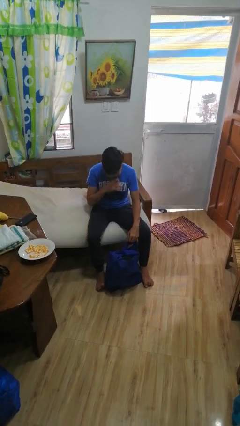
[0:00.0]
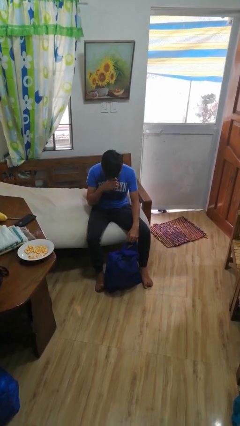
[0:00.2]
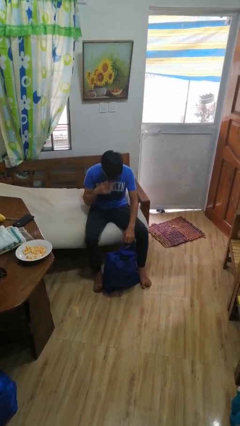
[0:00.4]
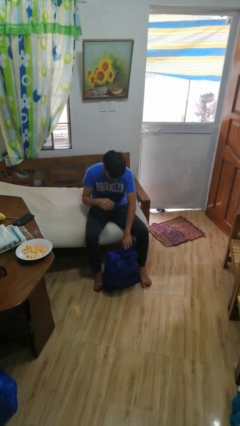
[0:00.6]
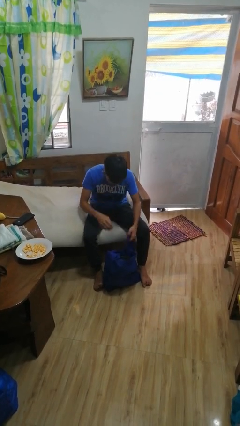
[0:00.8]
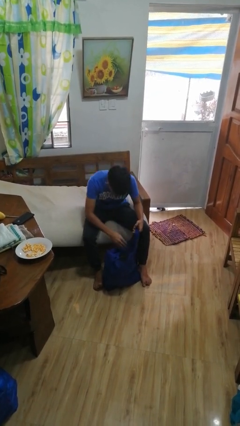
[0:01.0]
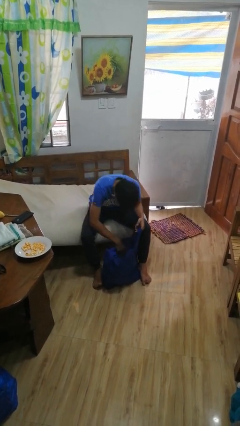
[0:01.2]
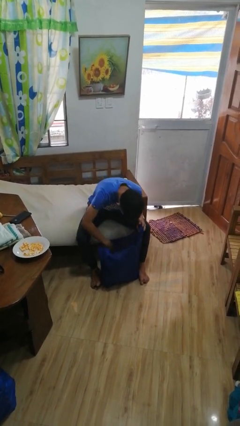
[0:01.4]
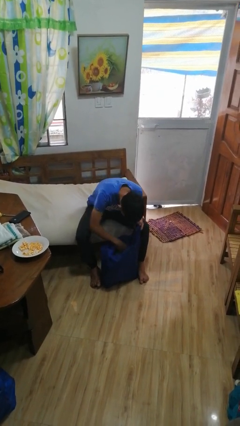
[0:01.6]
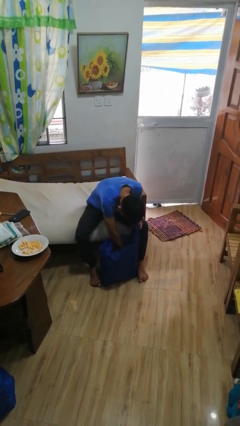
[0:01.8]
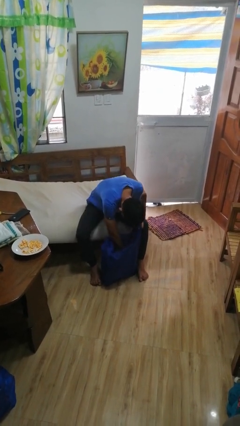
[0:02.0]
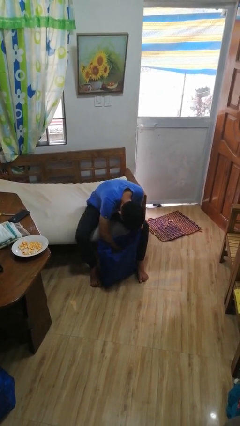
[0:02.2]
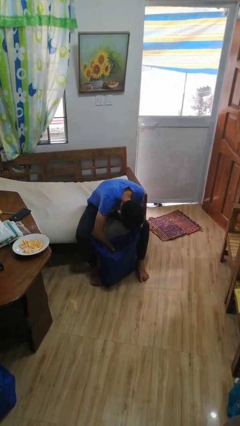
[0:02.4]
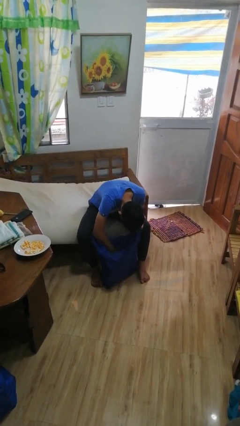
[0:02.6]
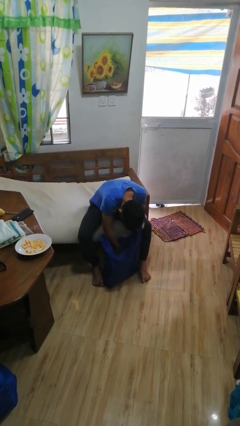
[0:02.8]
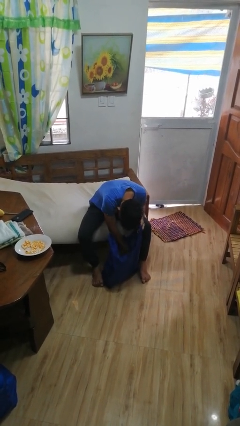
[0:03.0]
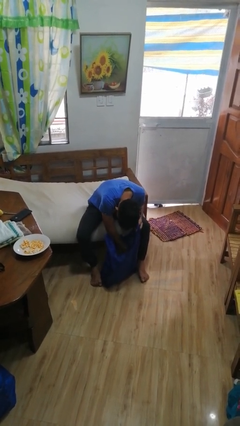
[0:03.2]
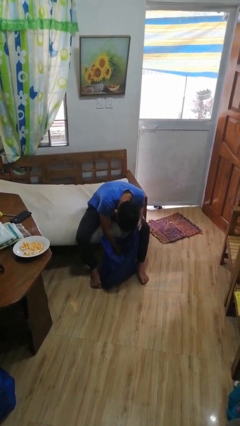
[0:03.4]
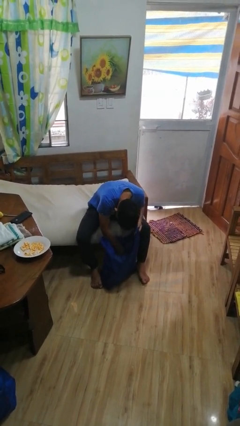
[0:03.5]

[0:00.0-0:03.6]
person searches in bag

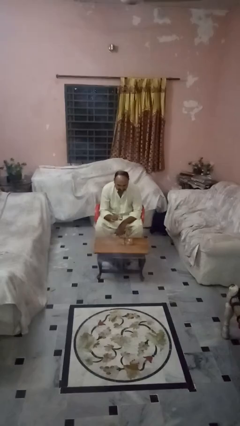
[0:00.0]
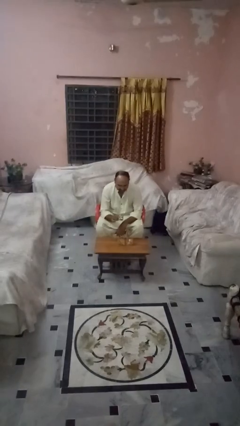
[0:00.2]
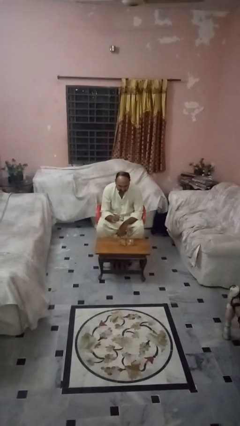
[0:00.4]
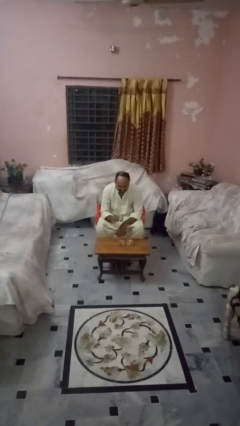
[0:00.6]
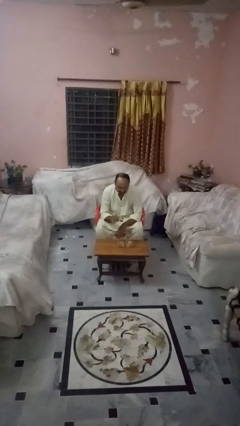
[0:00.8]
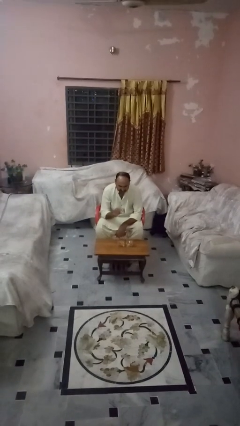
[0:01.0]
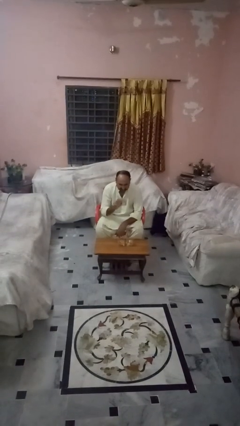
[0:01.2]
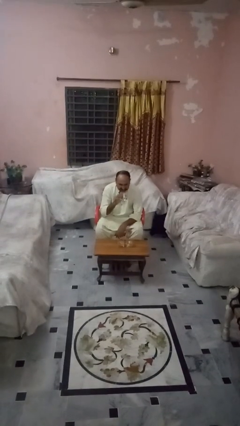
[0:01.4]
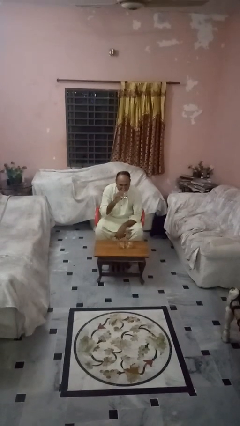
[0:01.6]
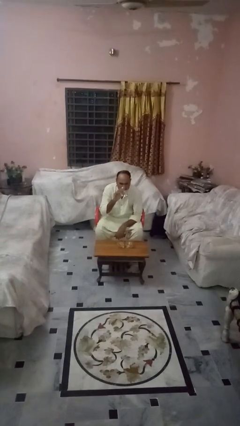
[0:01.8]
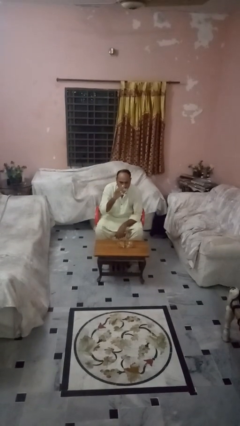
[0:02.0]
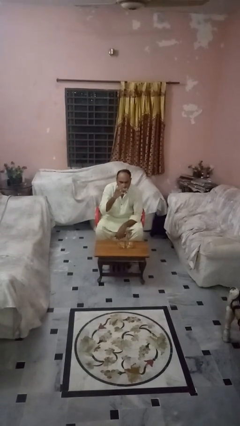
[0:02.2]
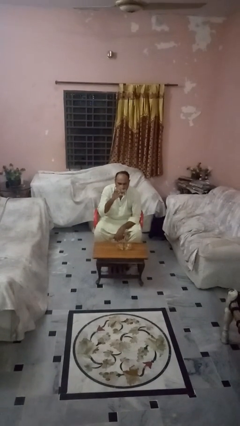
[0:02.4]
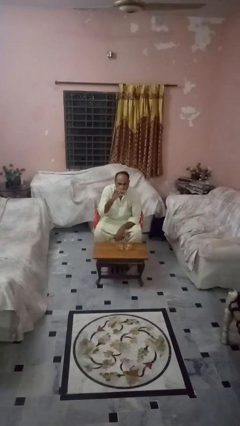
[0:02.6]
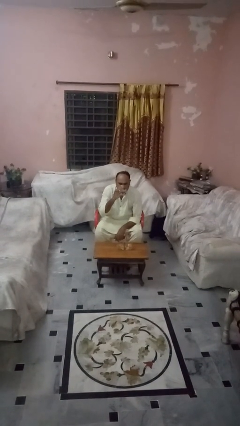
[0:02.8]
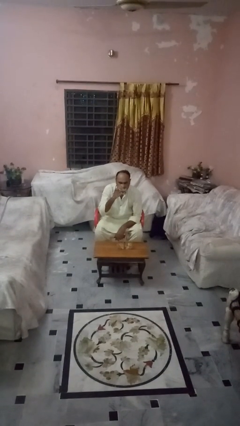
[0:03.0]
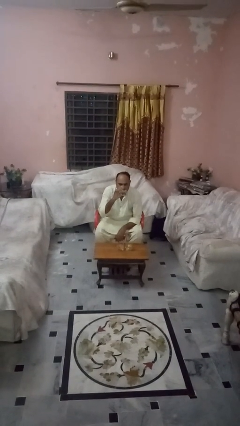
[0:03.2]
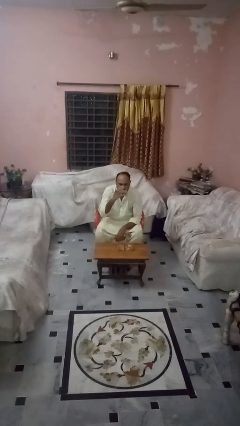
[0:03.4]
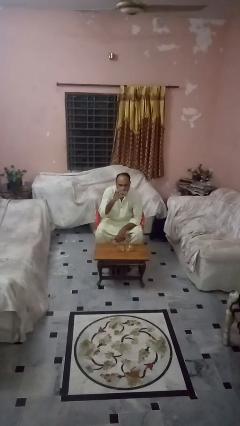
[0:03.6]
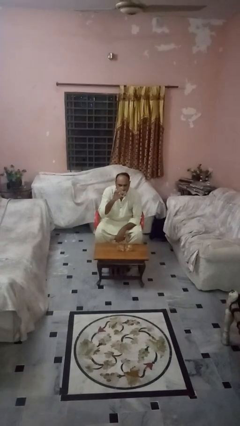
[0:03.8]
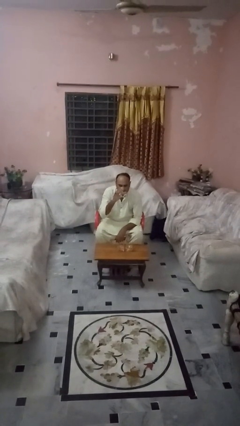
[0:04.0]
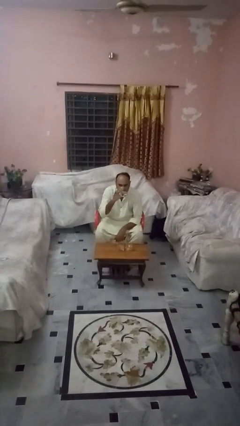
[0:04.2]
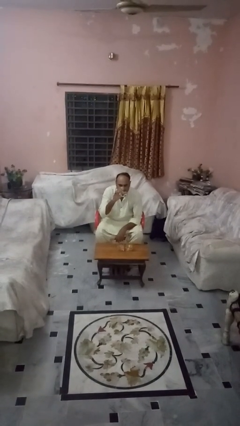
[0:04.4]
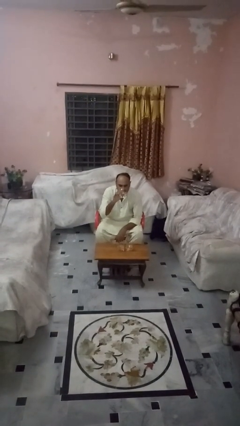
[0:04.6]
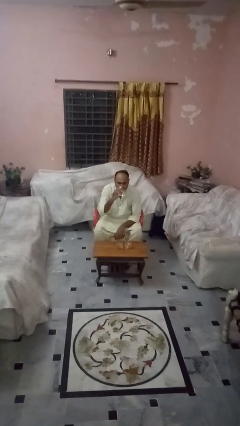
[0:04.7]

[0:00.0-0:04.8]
person drinks from shotglass

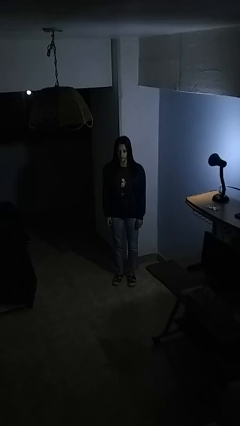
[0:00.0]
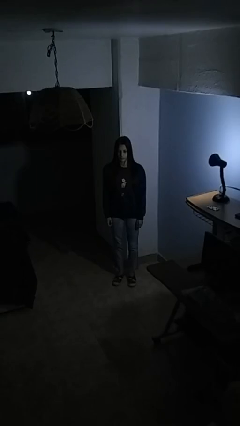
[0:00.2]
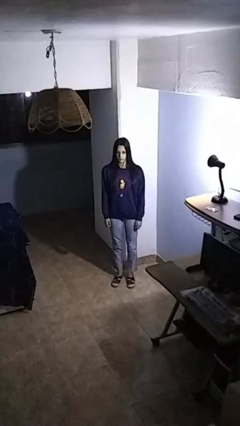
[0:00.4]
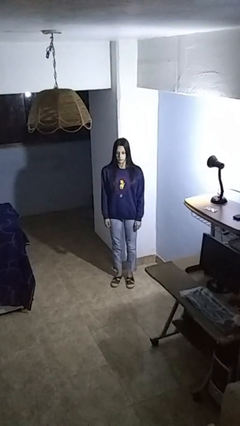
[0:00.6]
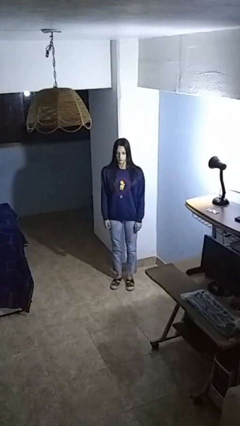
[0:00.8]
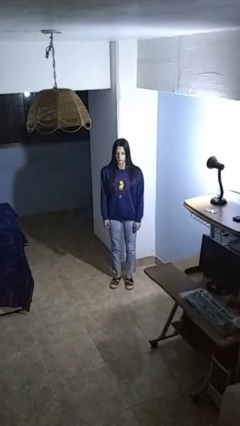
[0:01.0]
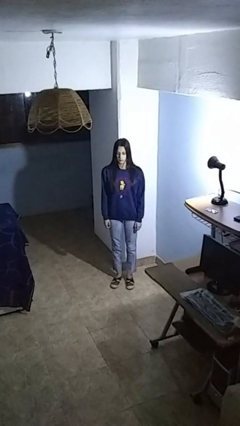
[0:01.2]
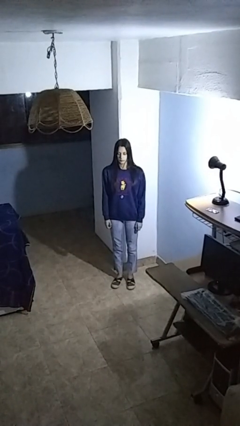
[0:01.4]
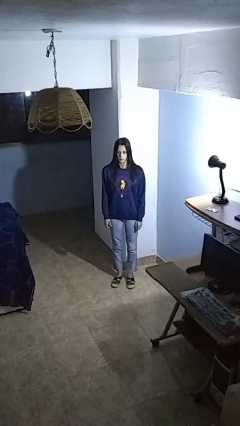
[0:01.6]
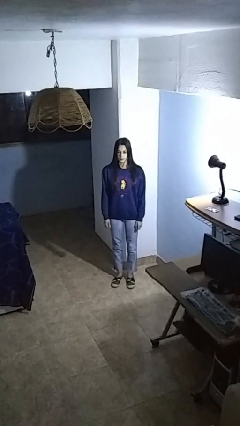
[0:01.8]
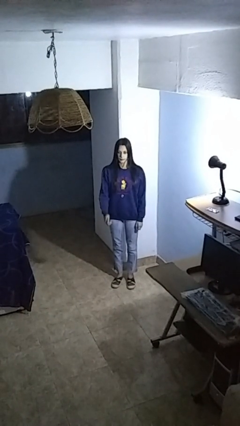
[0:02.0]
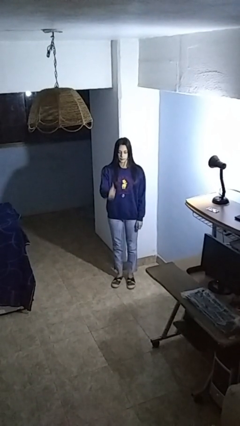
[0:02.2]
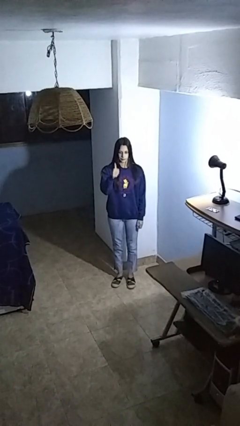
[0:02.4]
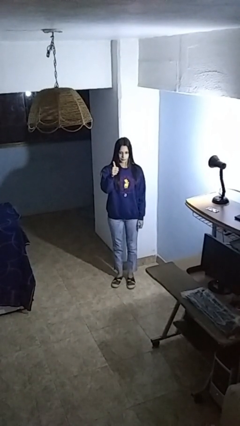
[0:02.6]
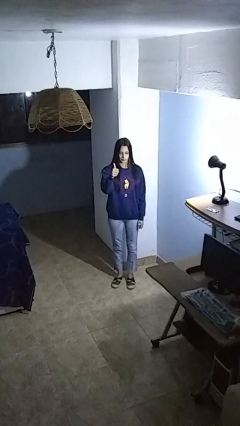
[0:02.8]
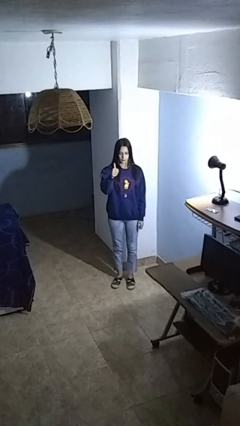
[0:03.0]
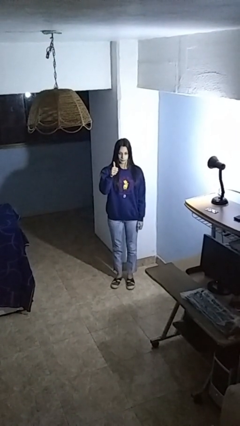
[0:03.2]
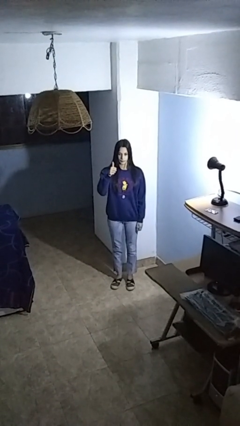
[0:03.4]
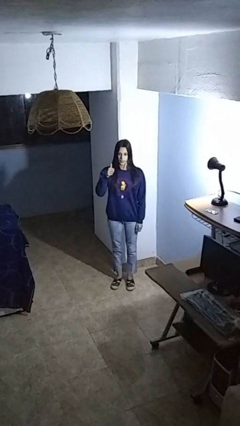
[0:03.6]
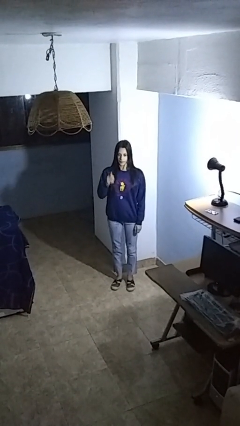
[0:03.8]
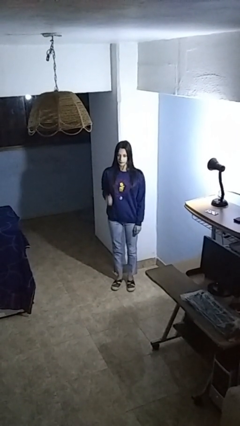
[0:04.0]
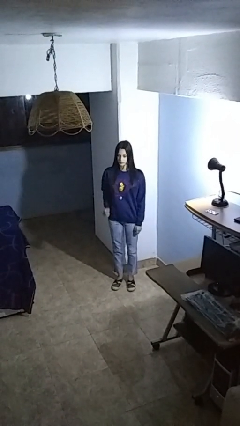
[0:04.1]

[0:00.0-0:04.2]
person gestures thumbs up

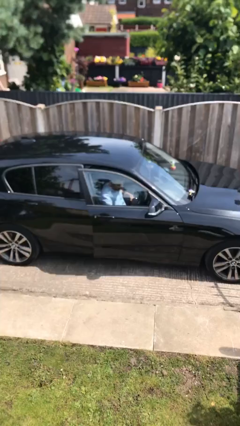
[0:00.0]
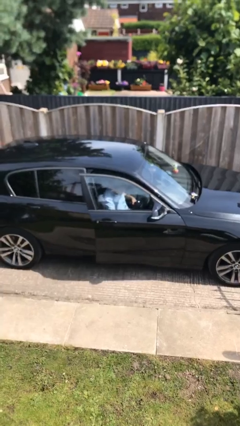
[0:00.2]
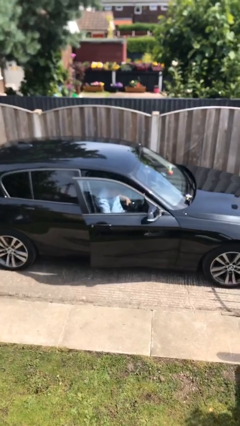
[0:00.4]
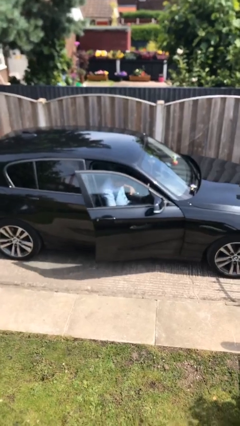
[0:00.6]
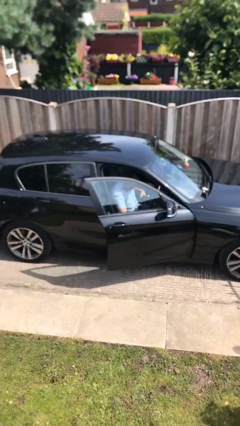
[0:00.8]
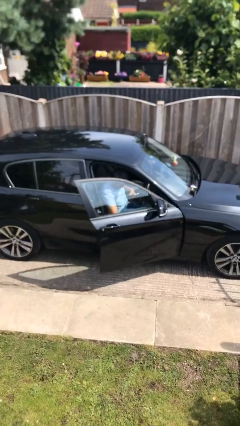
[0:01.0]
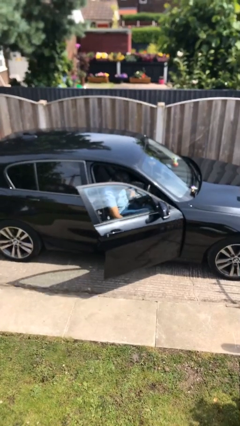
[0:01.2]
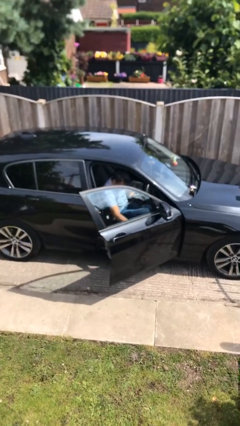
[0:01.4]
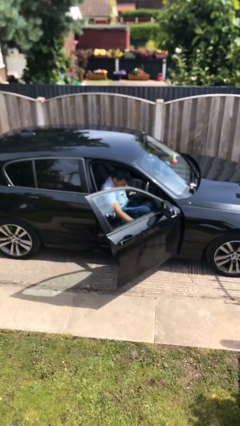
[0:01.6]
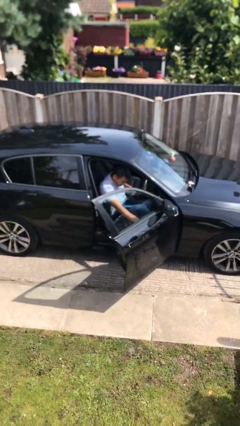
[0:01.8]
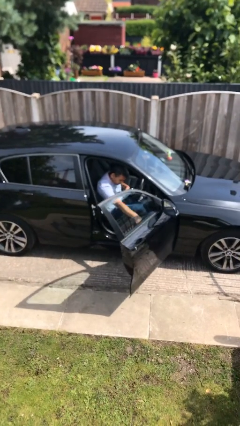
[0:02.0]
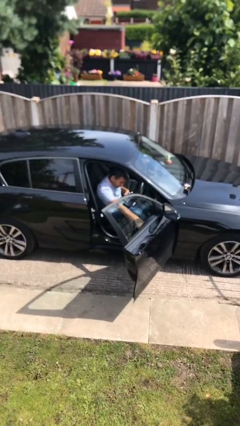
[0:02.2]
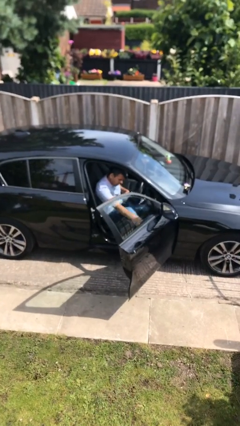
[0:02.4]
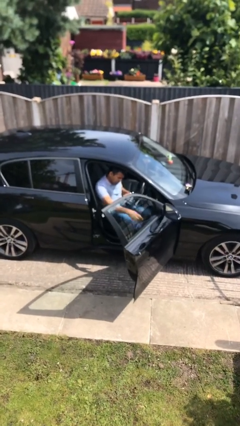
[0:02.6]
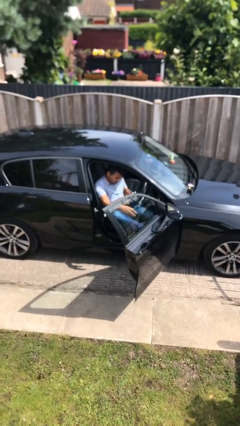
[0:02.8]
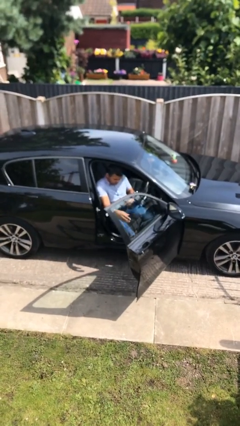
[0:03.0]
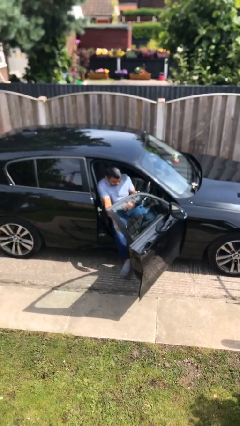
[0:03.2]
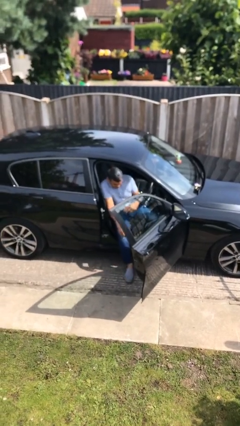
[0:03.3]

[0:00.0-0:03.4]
person opens car door

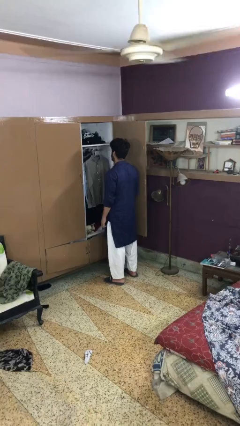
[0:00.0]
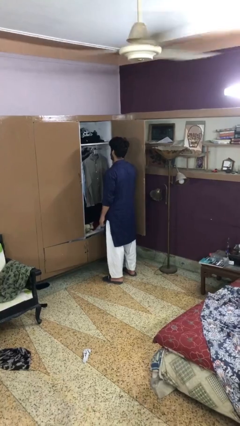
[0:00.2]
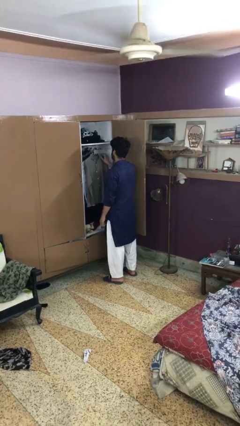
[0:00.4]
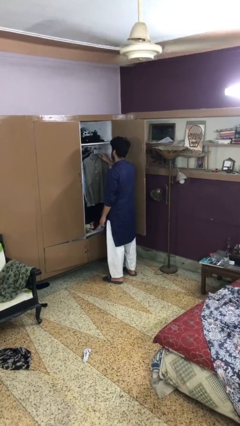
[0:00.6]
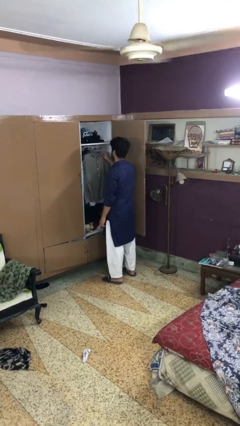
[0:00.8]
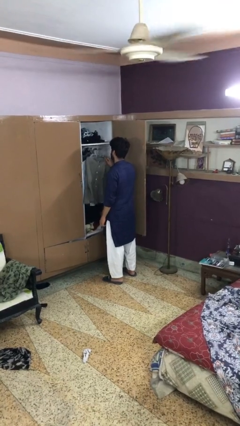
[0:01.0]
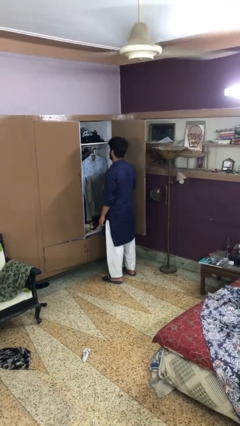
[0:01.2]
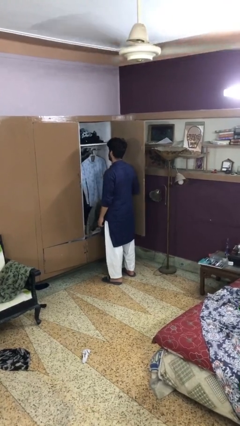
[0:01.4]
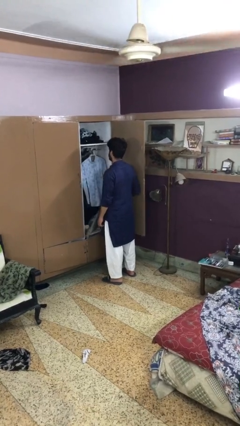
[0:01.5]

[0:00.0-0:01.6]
person takes clothes from closet

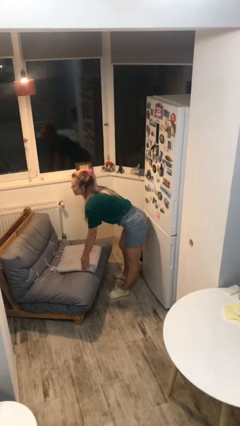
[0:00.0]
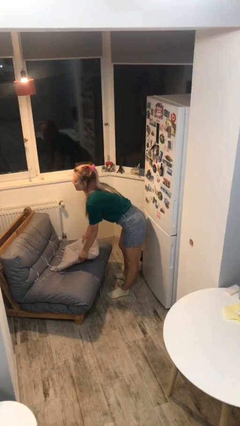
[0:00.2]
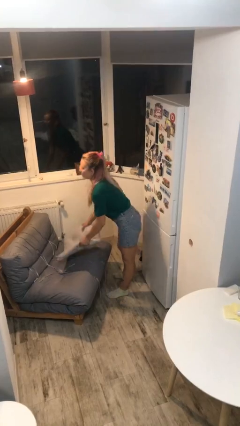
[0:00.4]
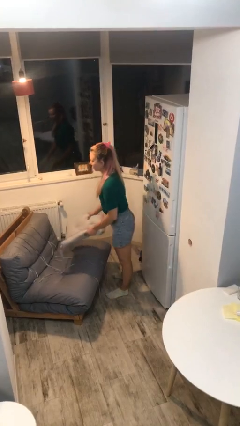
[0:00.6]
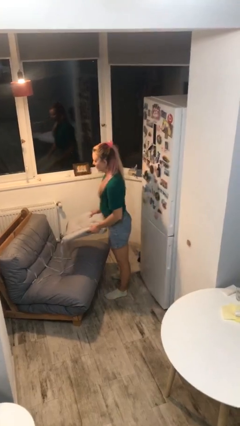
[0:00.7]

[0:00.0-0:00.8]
person picks up object from couch
